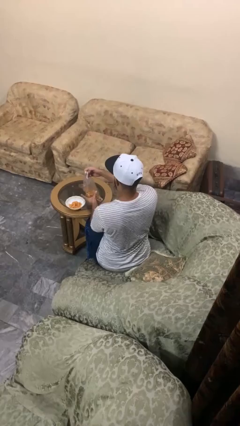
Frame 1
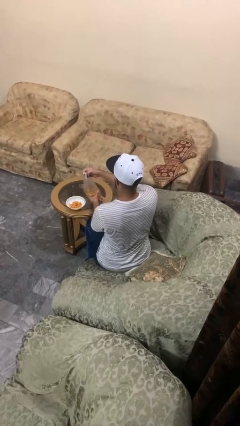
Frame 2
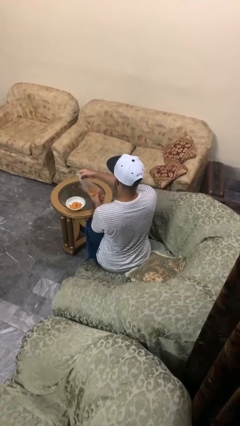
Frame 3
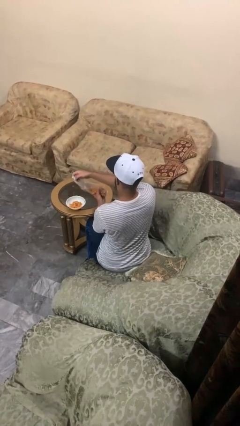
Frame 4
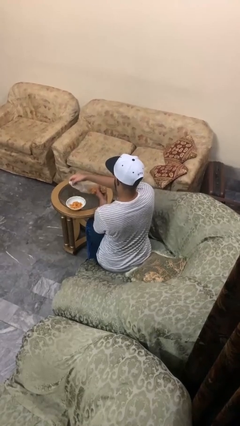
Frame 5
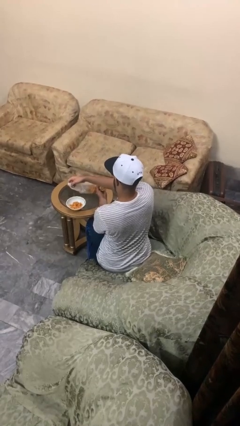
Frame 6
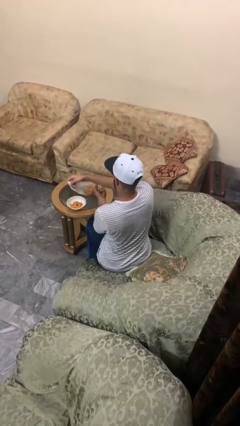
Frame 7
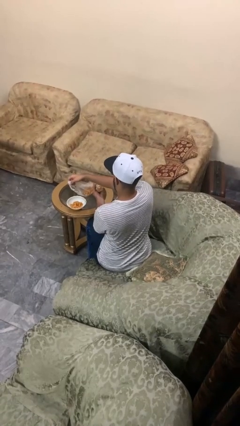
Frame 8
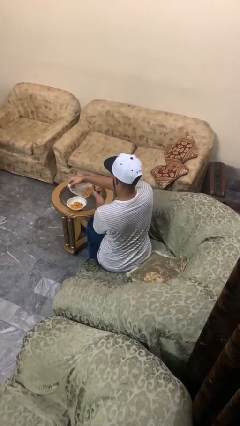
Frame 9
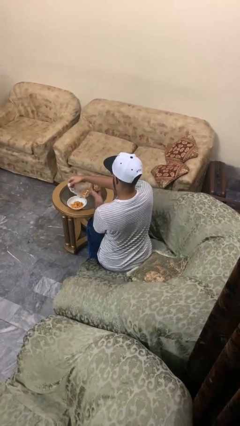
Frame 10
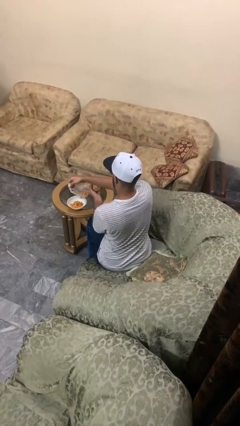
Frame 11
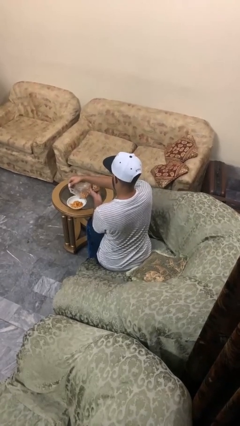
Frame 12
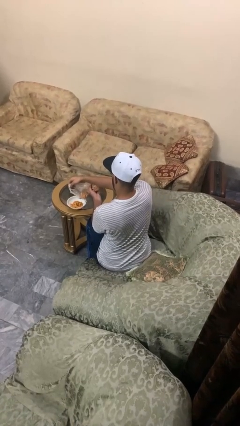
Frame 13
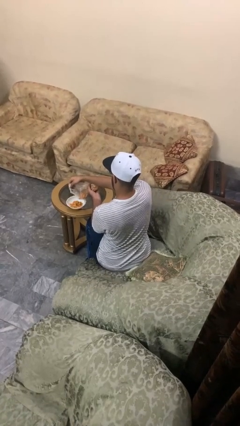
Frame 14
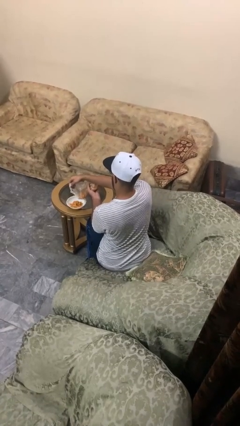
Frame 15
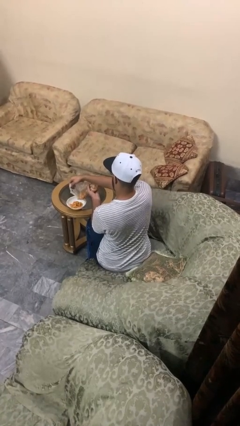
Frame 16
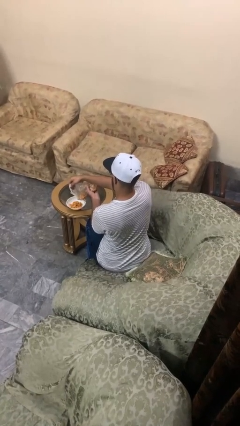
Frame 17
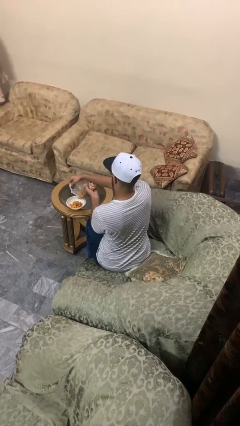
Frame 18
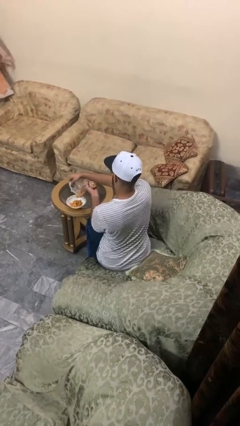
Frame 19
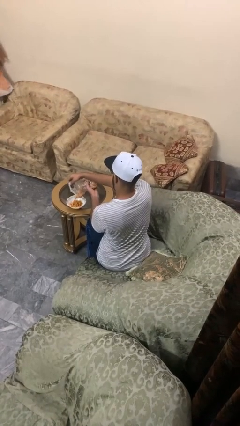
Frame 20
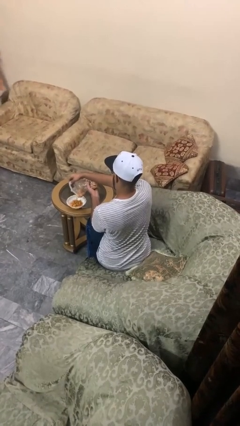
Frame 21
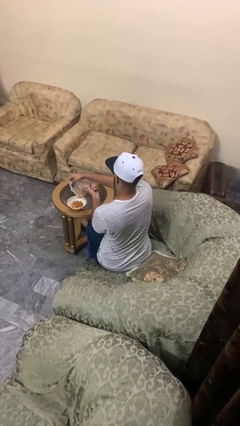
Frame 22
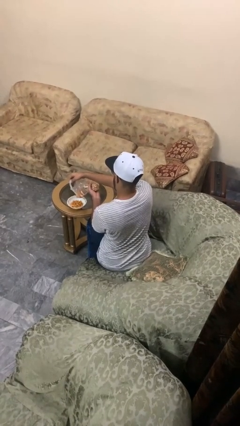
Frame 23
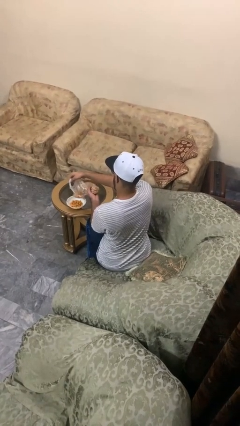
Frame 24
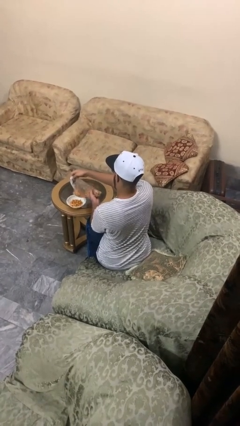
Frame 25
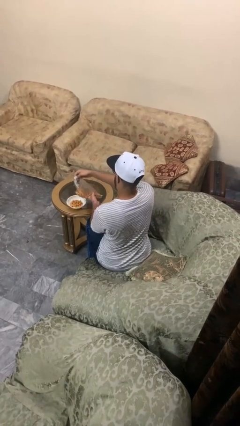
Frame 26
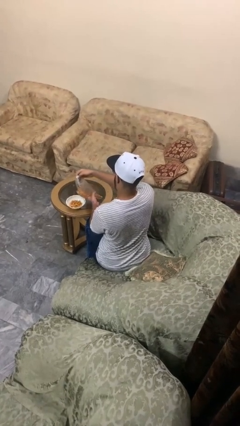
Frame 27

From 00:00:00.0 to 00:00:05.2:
person pours into bowl

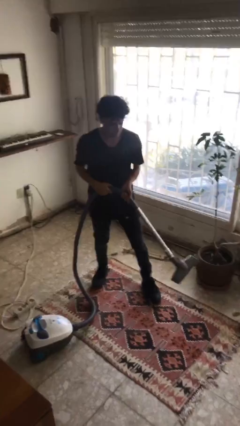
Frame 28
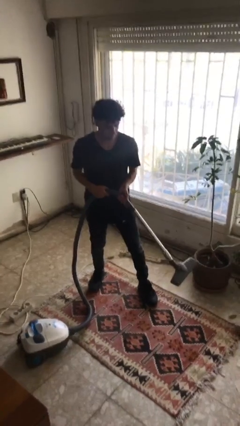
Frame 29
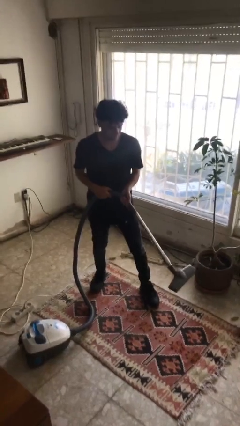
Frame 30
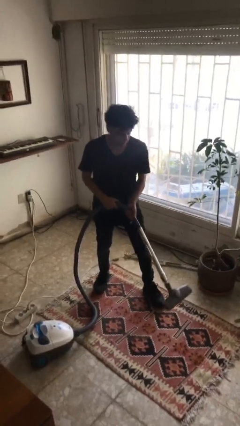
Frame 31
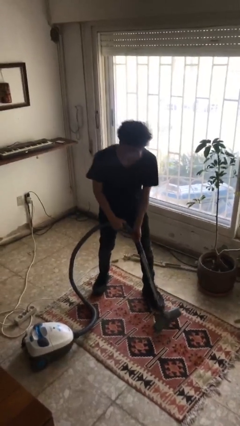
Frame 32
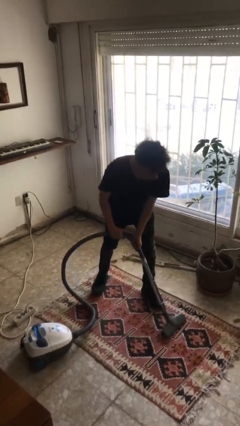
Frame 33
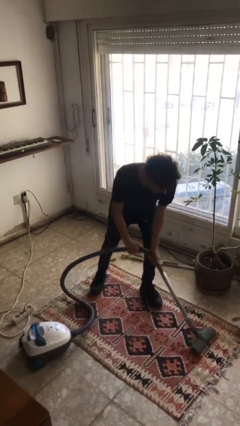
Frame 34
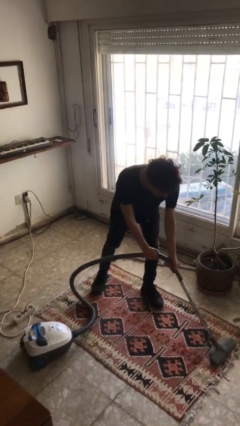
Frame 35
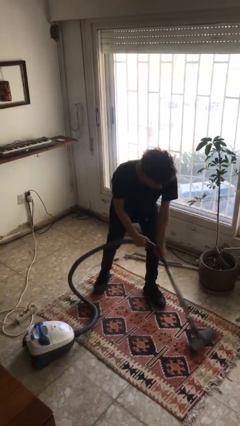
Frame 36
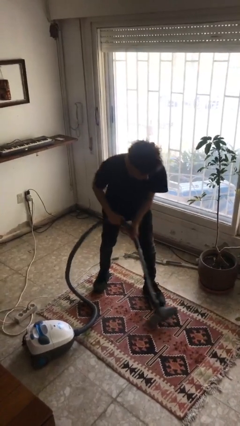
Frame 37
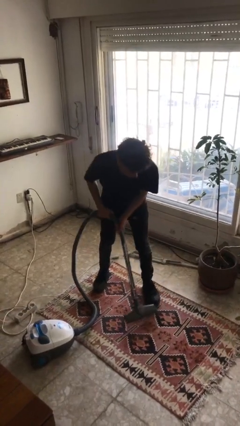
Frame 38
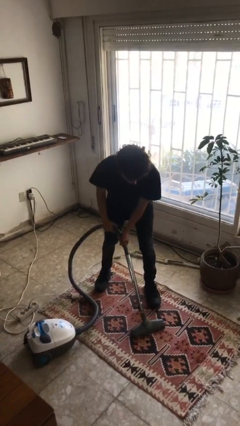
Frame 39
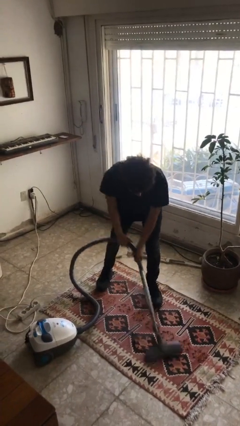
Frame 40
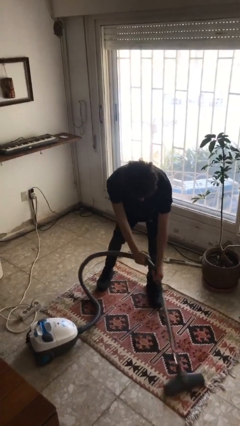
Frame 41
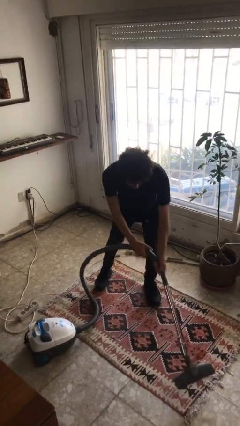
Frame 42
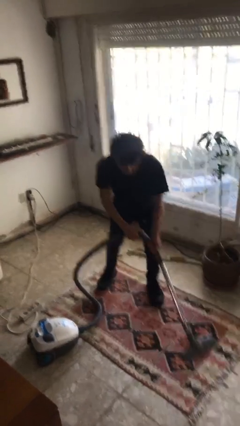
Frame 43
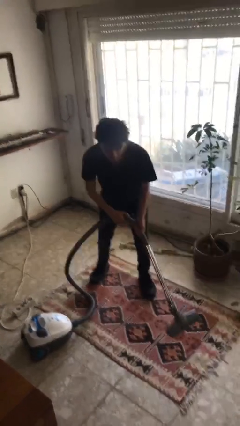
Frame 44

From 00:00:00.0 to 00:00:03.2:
person vacuums carpet

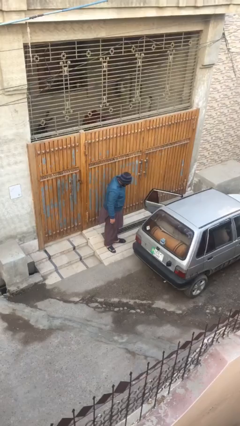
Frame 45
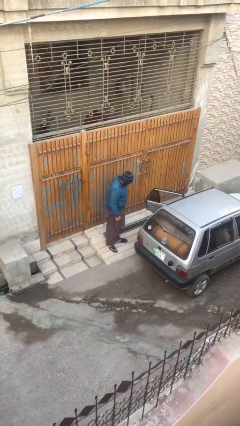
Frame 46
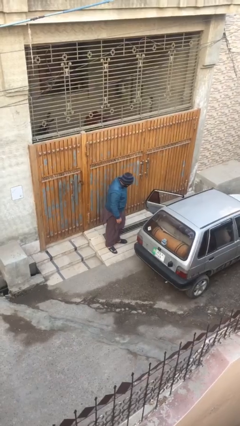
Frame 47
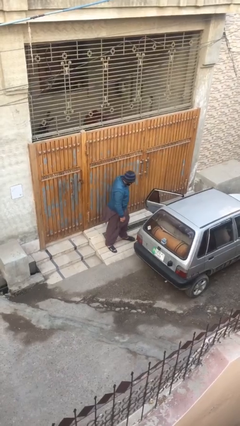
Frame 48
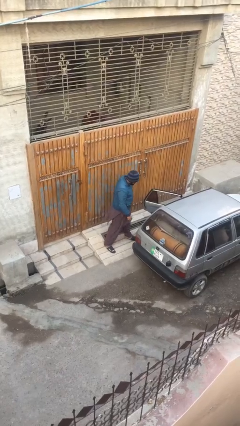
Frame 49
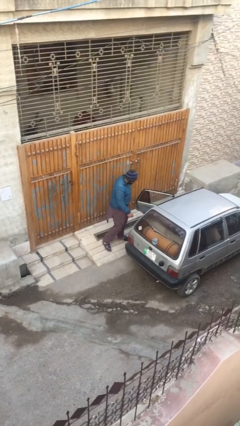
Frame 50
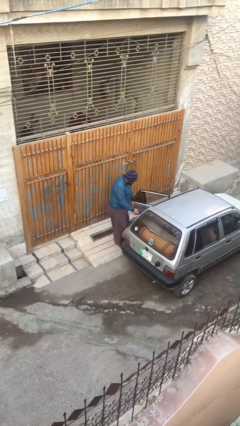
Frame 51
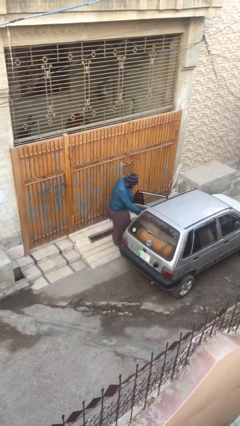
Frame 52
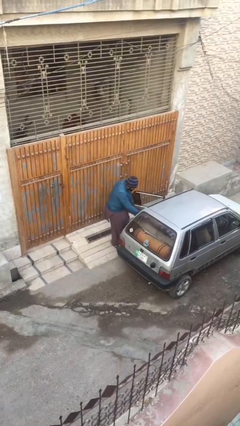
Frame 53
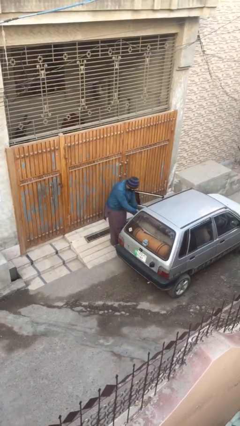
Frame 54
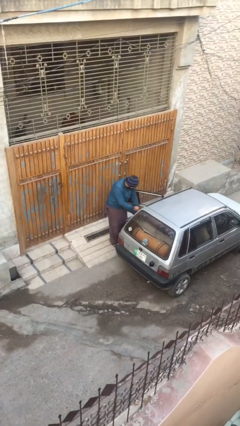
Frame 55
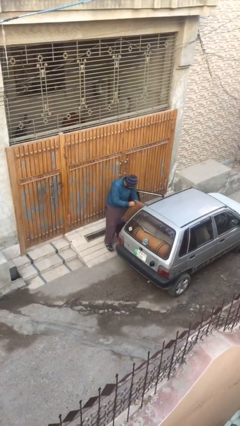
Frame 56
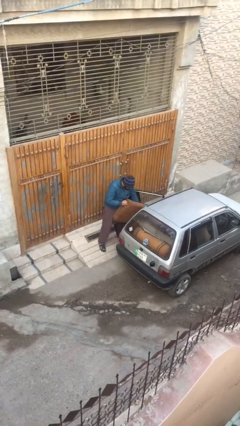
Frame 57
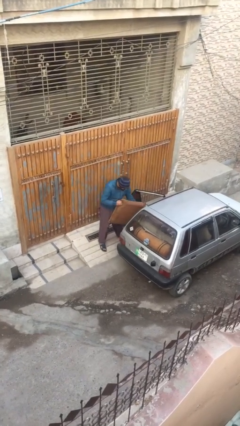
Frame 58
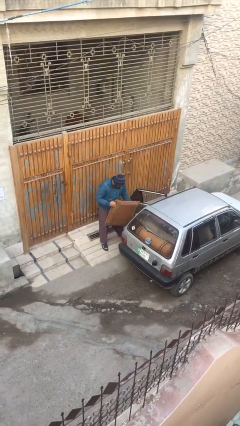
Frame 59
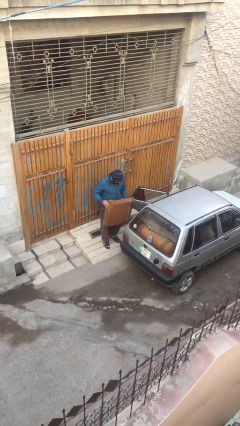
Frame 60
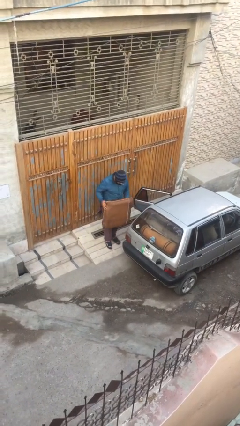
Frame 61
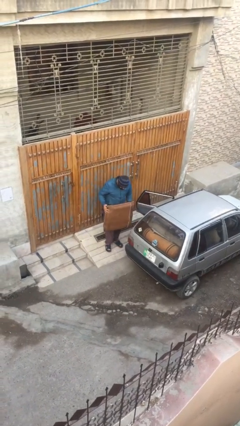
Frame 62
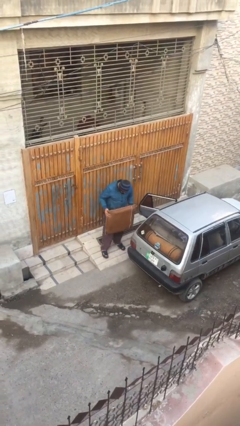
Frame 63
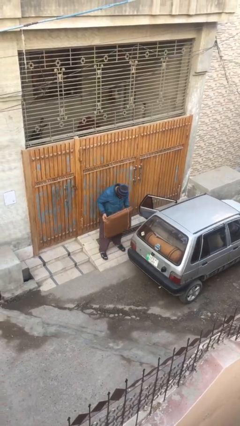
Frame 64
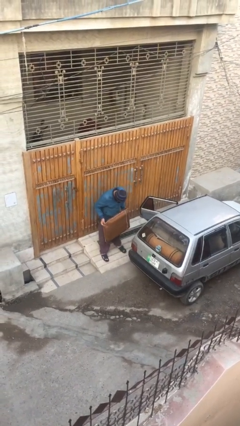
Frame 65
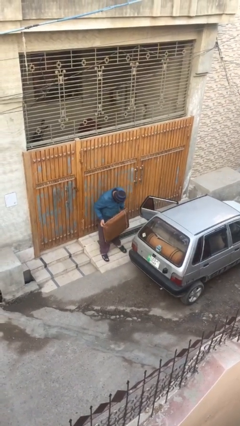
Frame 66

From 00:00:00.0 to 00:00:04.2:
person unloads car

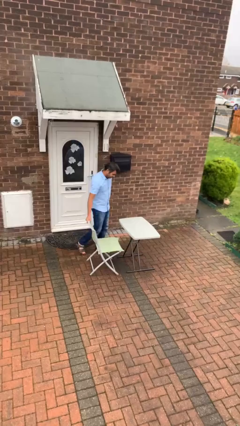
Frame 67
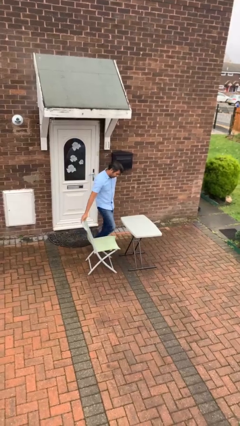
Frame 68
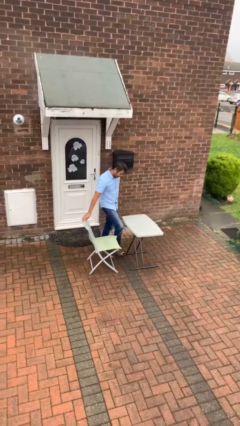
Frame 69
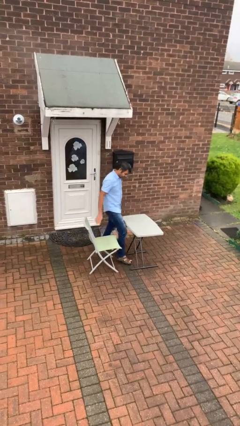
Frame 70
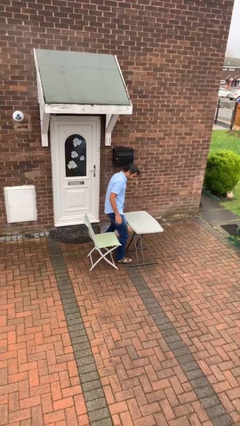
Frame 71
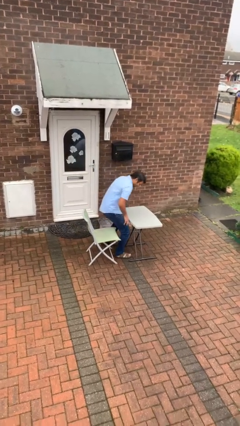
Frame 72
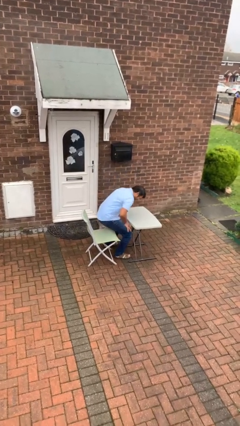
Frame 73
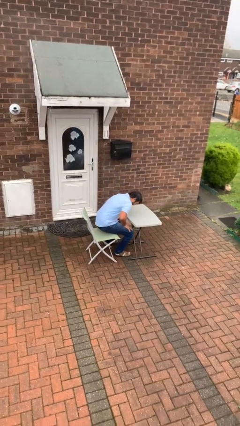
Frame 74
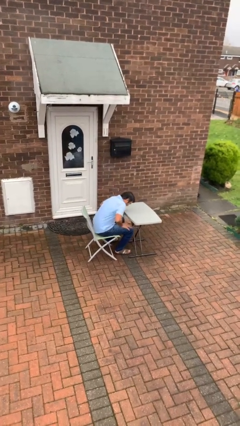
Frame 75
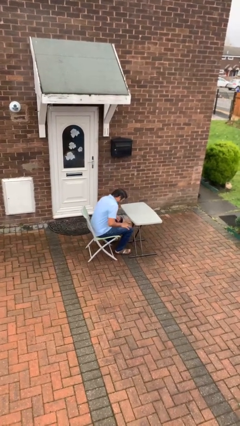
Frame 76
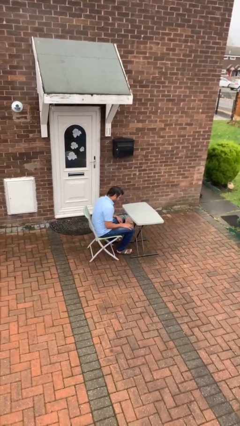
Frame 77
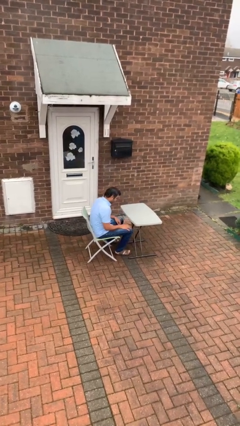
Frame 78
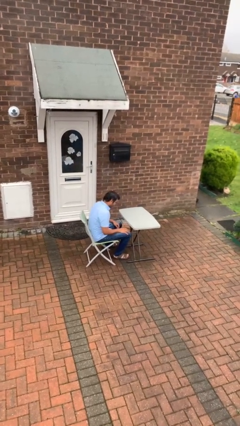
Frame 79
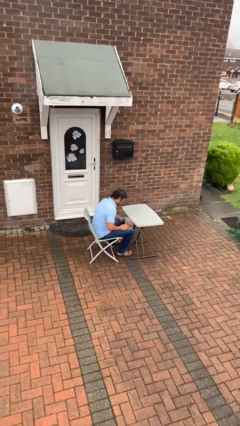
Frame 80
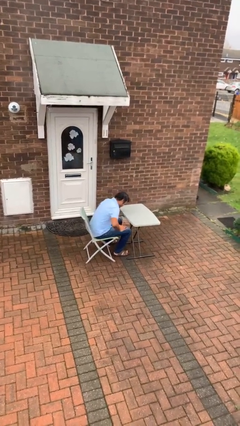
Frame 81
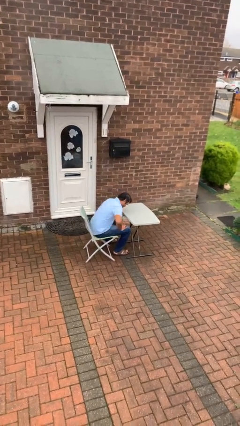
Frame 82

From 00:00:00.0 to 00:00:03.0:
person sits down

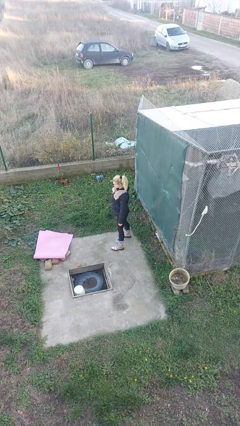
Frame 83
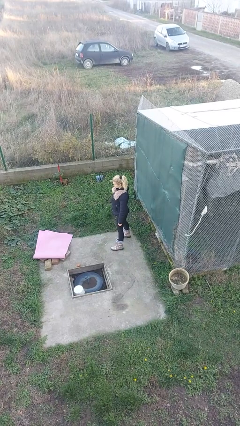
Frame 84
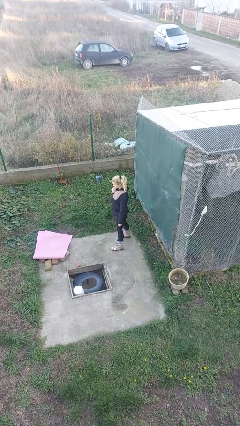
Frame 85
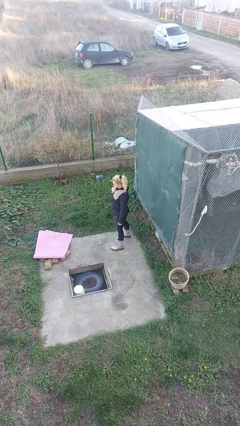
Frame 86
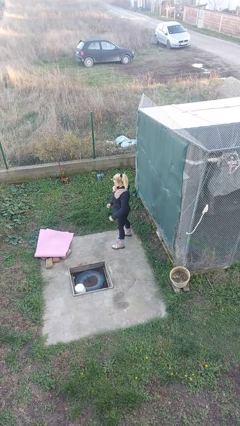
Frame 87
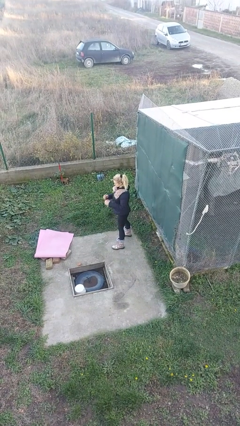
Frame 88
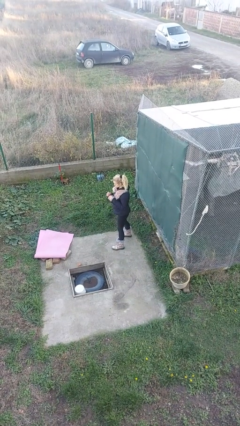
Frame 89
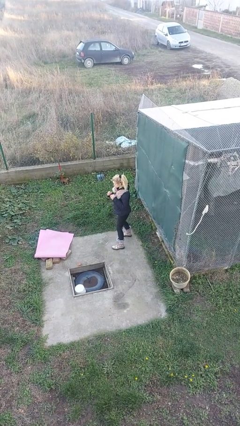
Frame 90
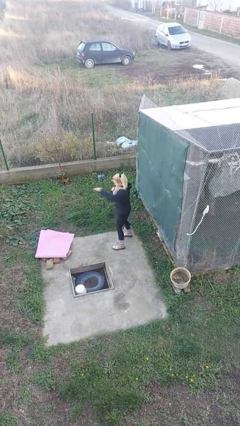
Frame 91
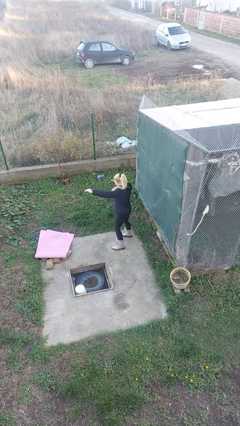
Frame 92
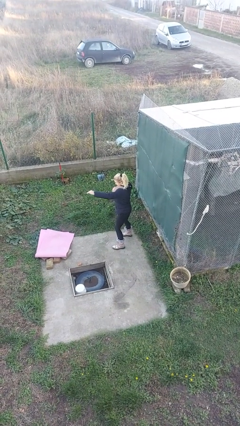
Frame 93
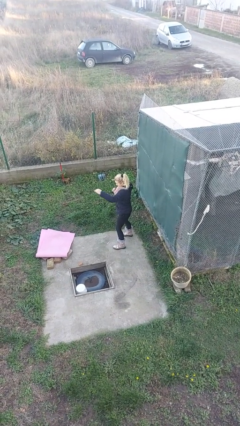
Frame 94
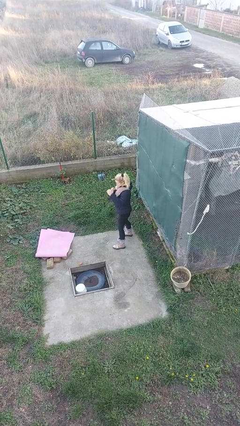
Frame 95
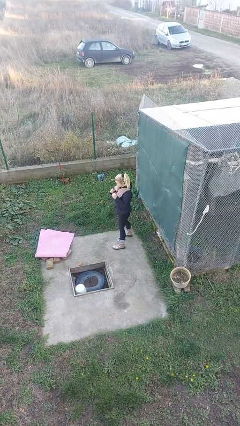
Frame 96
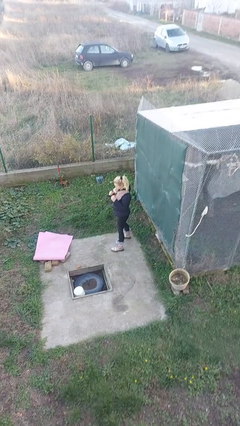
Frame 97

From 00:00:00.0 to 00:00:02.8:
person punches
